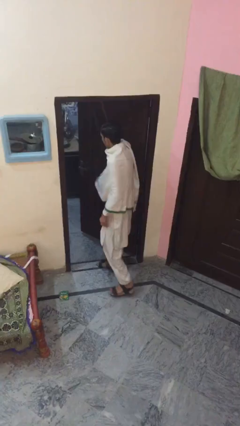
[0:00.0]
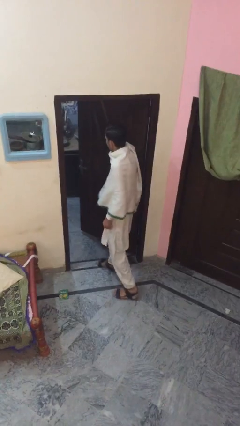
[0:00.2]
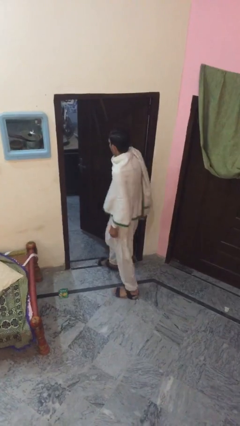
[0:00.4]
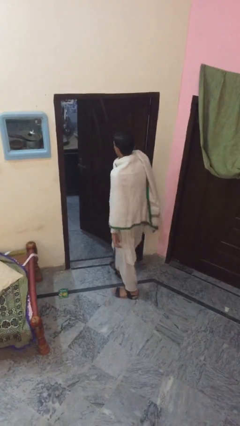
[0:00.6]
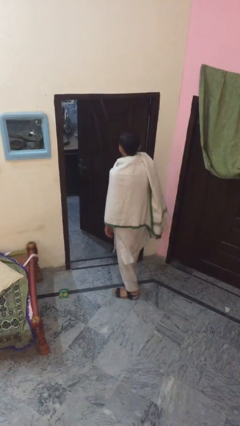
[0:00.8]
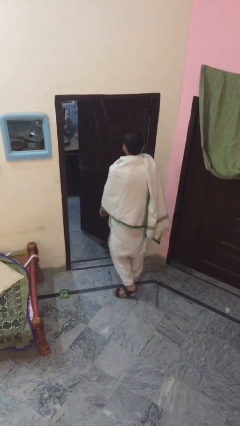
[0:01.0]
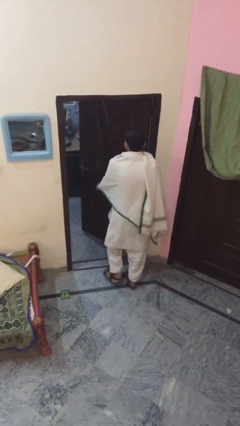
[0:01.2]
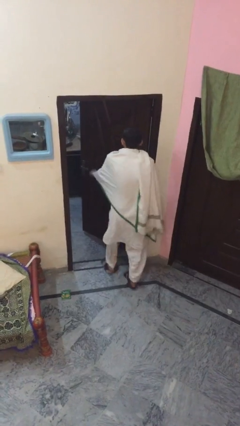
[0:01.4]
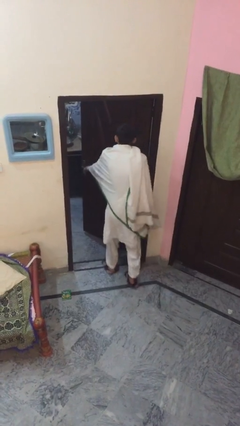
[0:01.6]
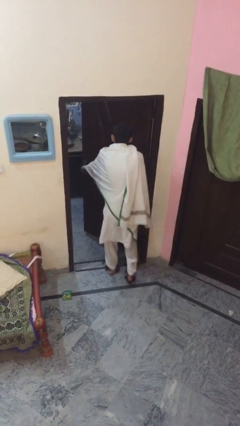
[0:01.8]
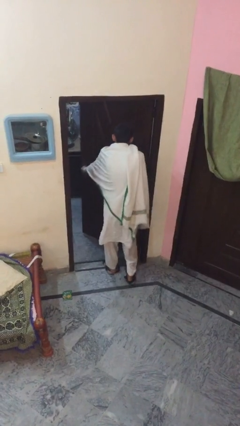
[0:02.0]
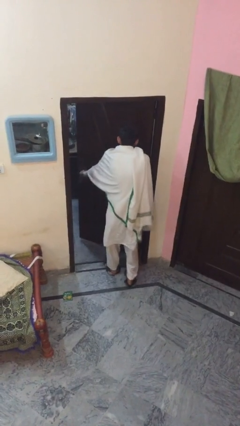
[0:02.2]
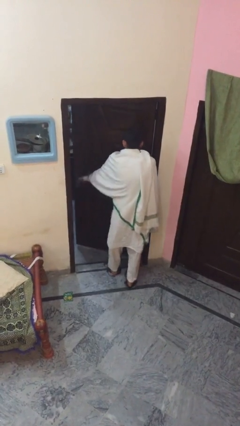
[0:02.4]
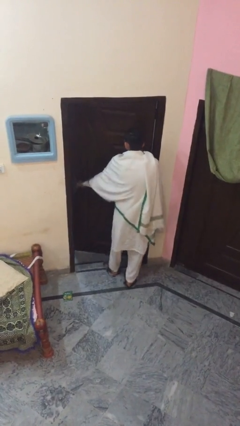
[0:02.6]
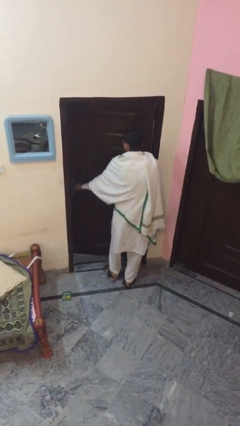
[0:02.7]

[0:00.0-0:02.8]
person closes facility door

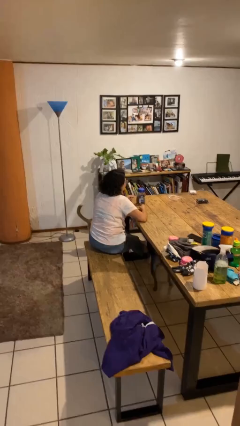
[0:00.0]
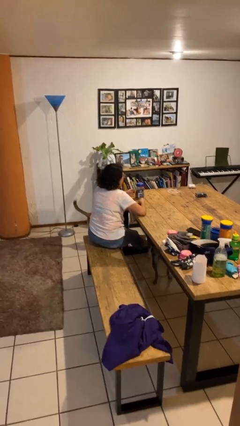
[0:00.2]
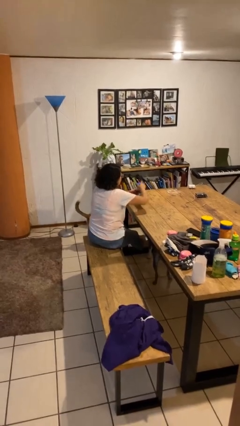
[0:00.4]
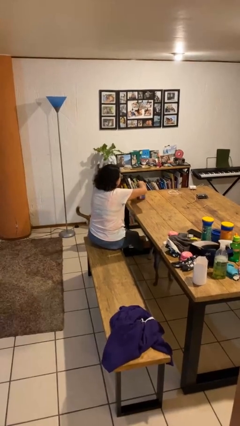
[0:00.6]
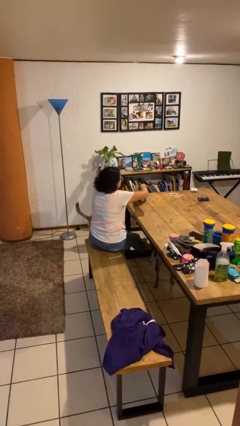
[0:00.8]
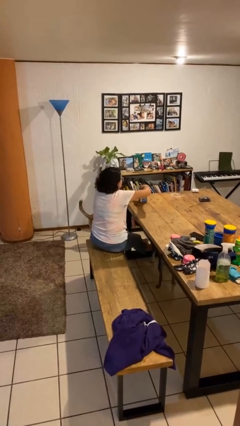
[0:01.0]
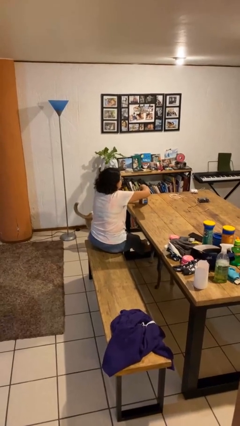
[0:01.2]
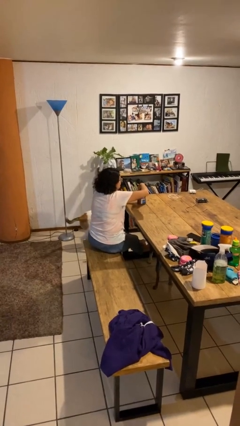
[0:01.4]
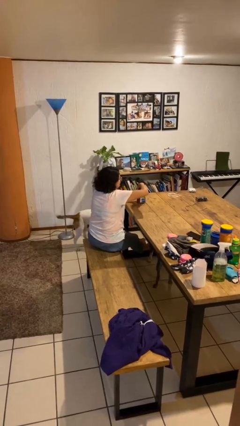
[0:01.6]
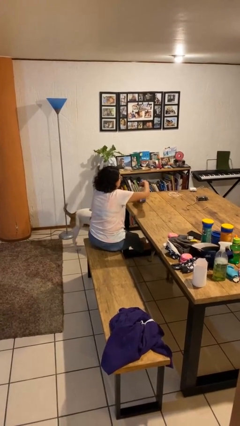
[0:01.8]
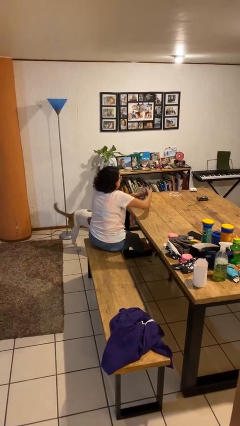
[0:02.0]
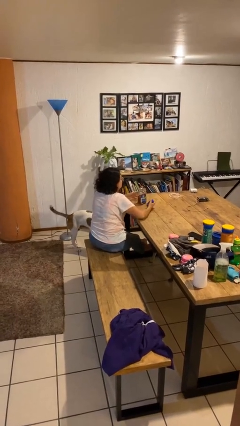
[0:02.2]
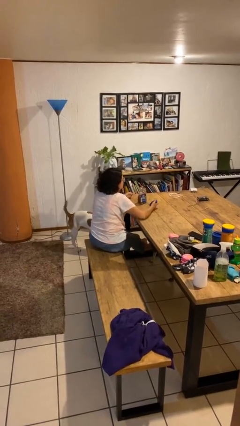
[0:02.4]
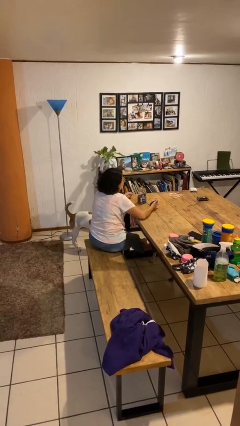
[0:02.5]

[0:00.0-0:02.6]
person opens jar

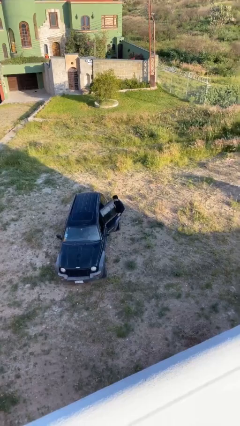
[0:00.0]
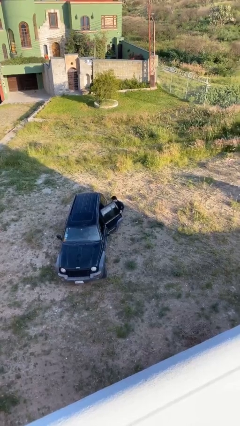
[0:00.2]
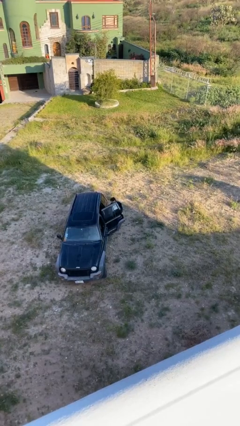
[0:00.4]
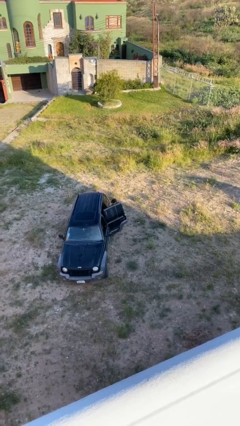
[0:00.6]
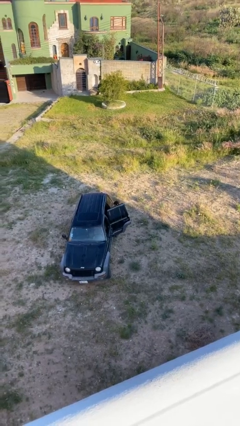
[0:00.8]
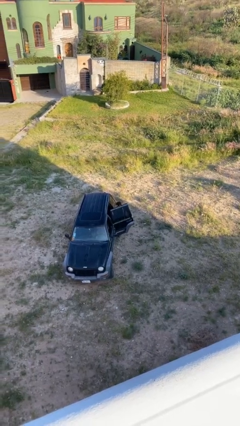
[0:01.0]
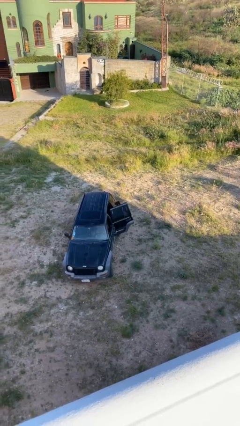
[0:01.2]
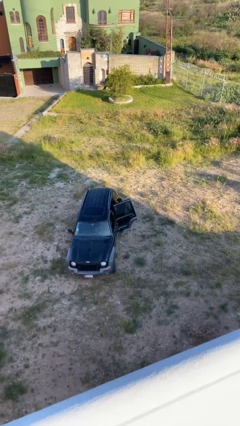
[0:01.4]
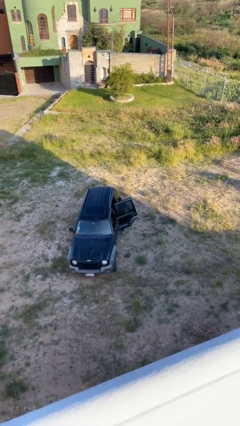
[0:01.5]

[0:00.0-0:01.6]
person opens car door

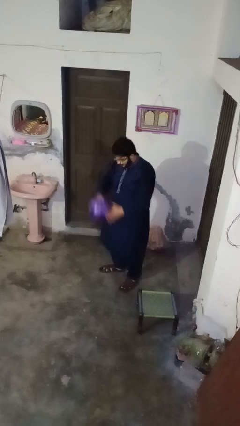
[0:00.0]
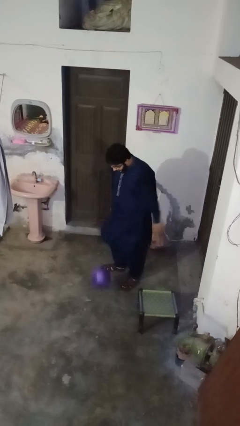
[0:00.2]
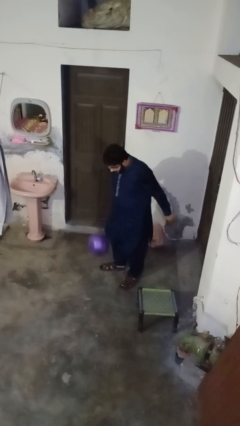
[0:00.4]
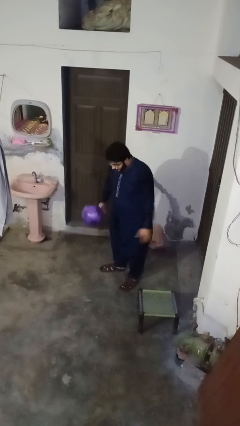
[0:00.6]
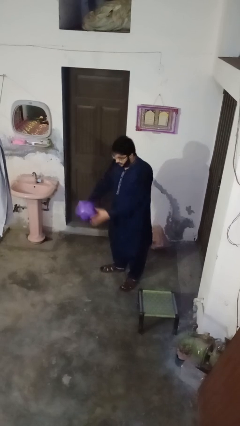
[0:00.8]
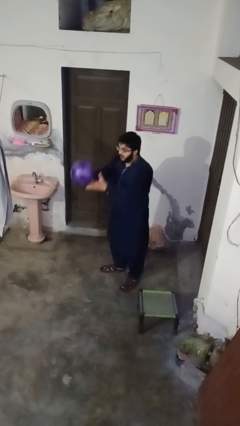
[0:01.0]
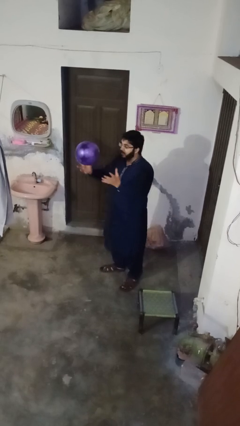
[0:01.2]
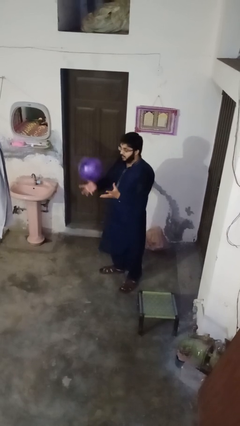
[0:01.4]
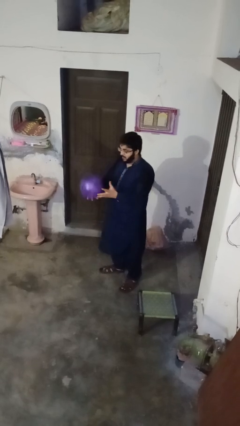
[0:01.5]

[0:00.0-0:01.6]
person bounces ball on floor

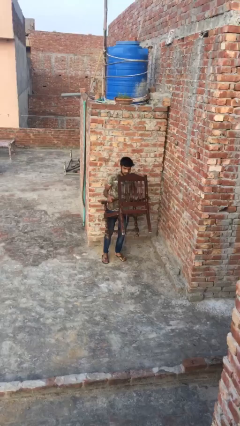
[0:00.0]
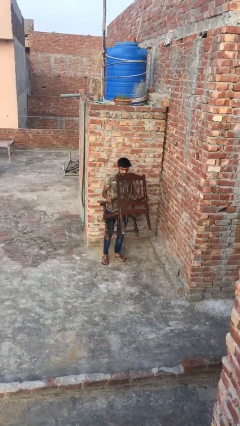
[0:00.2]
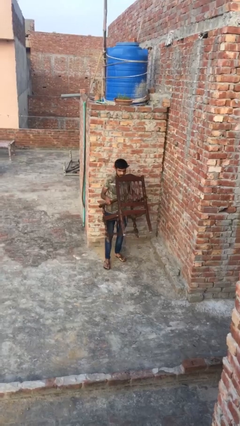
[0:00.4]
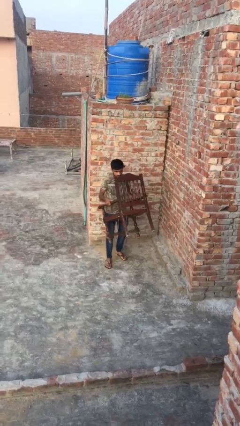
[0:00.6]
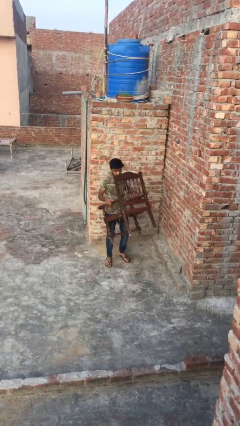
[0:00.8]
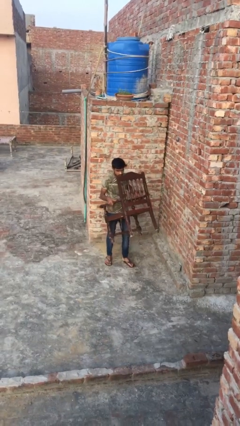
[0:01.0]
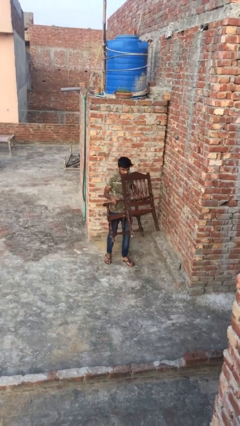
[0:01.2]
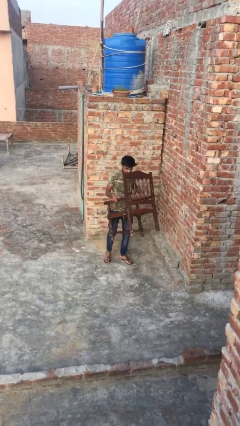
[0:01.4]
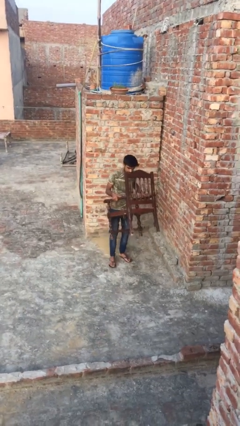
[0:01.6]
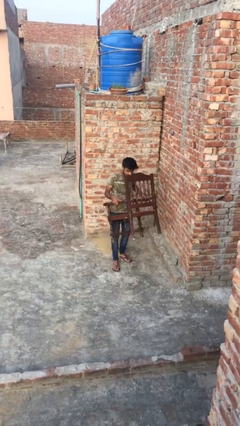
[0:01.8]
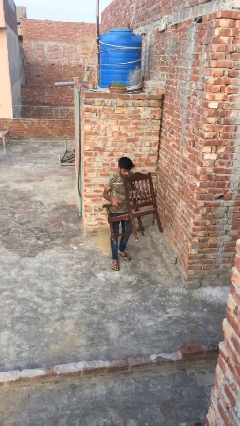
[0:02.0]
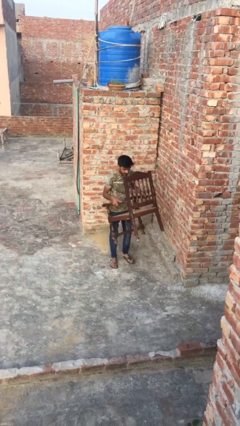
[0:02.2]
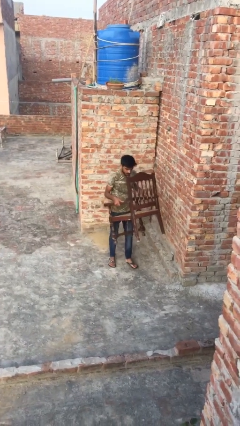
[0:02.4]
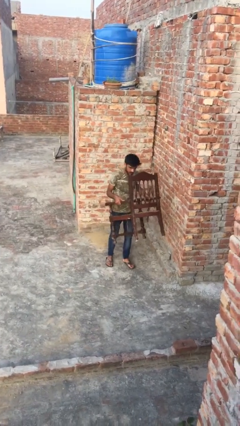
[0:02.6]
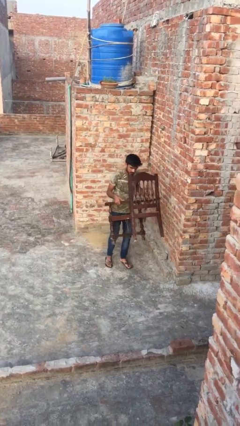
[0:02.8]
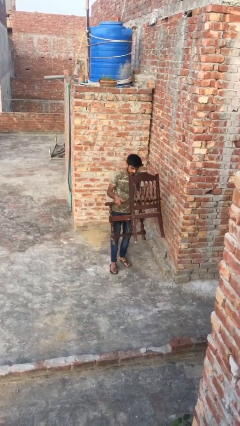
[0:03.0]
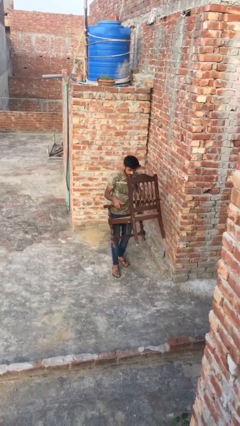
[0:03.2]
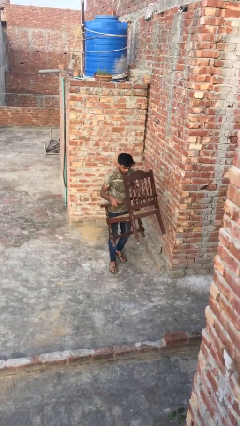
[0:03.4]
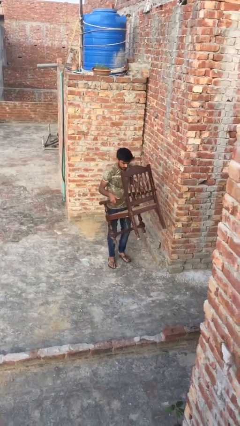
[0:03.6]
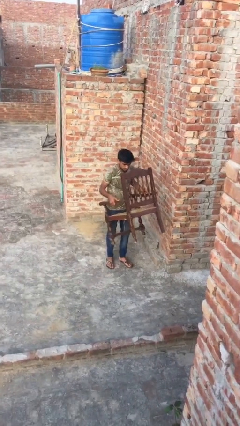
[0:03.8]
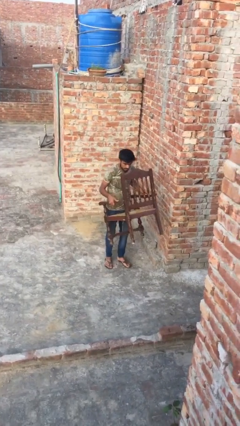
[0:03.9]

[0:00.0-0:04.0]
person carries heavy object

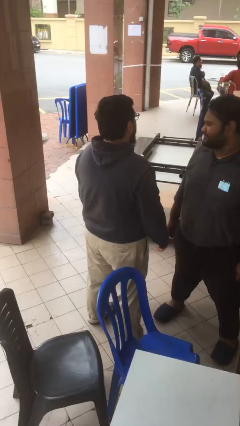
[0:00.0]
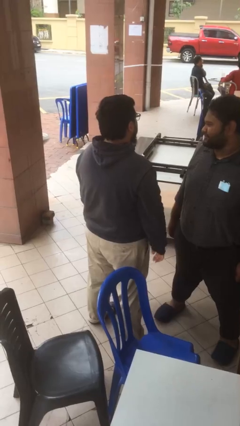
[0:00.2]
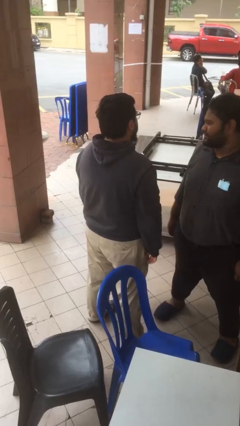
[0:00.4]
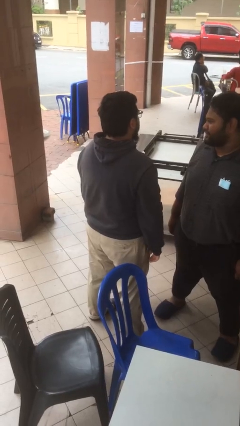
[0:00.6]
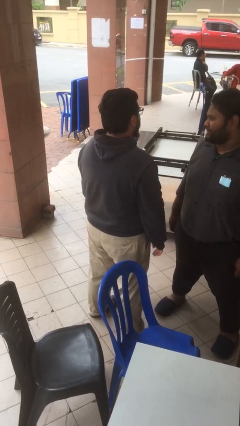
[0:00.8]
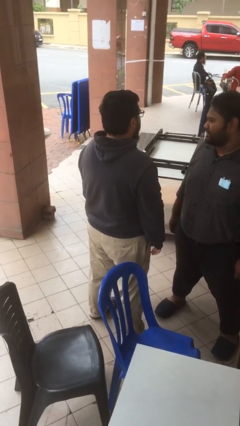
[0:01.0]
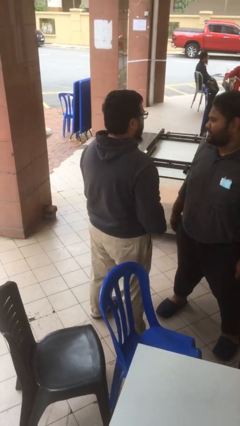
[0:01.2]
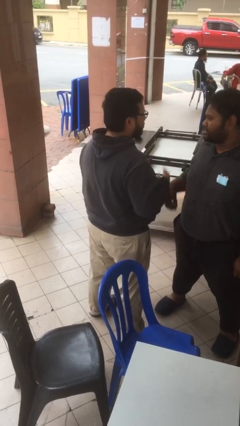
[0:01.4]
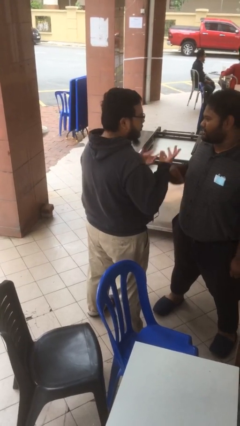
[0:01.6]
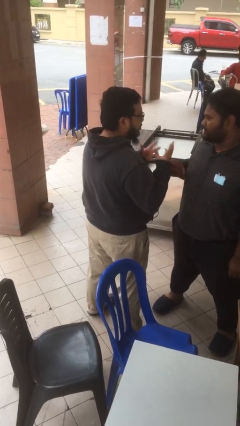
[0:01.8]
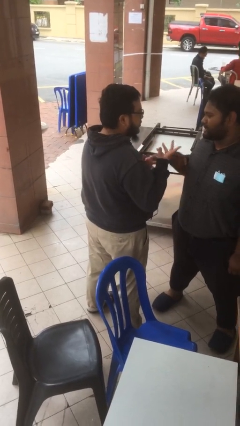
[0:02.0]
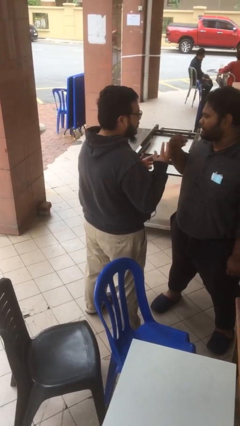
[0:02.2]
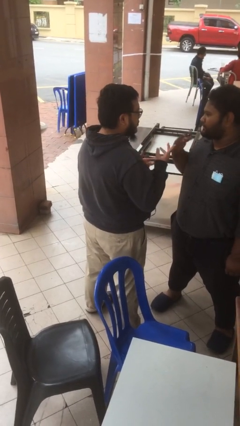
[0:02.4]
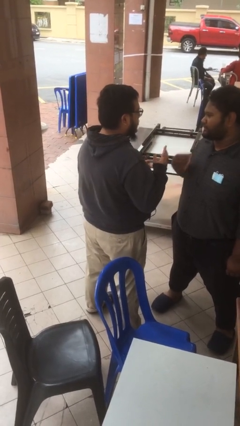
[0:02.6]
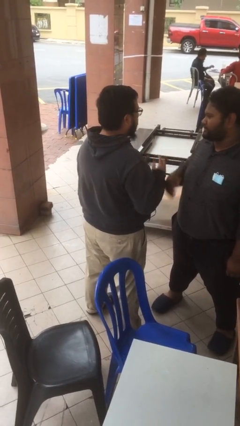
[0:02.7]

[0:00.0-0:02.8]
person talks to person

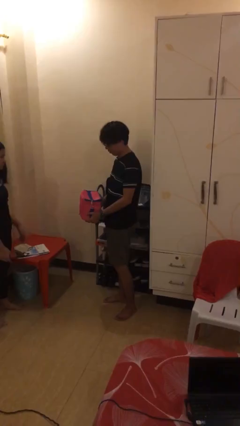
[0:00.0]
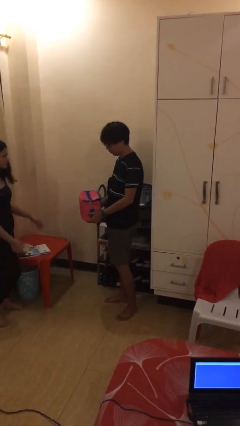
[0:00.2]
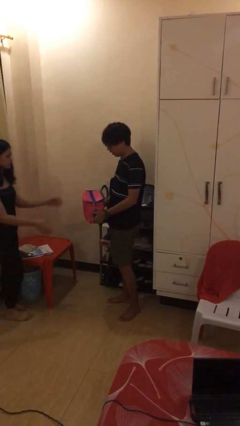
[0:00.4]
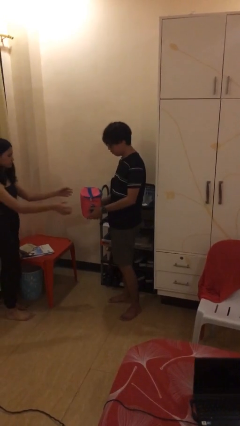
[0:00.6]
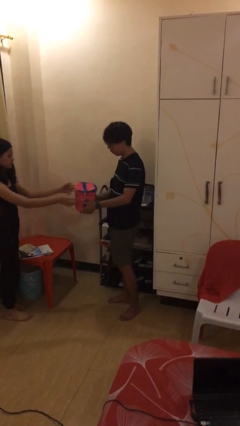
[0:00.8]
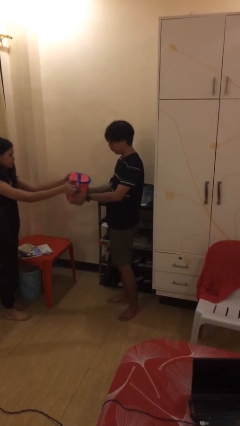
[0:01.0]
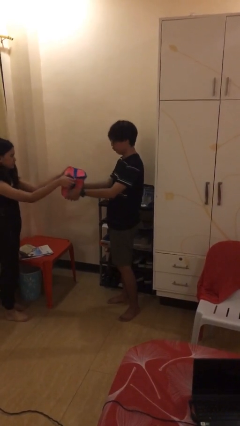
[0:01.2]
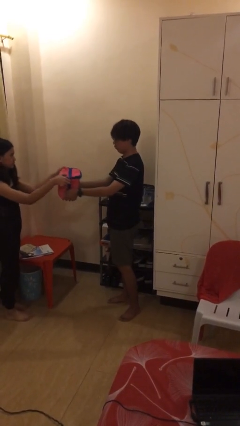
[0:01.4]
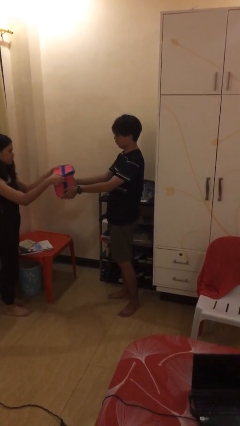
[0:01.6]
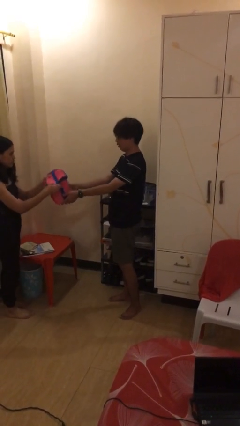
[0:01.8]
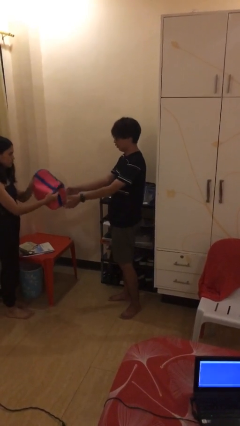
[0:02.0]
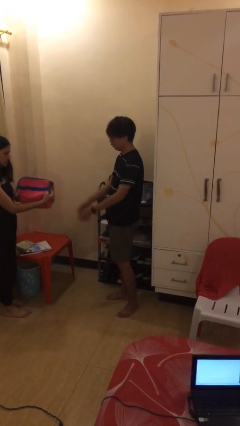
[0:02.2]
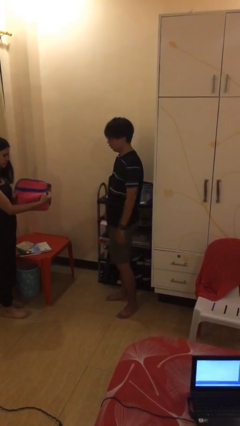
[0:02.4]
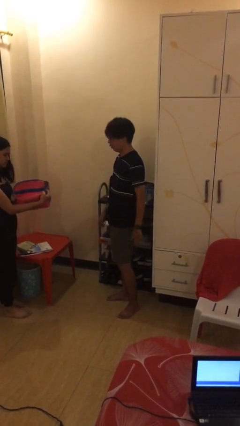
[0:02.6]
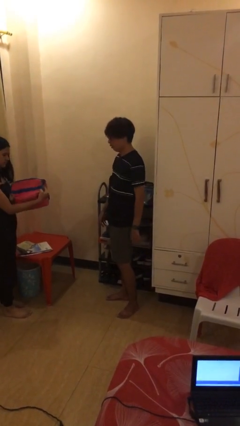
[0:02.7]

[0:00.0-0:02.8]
person transfers object to person
